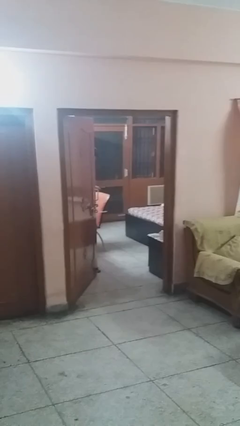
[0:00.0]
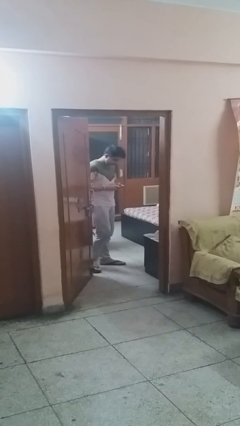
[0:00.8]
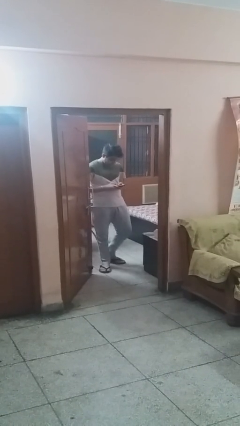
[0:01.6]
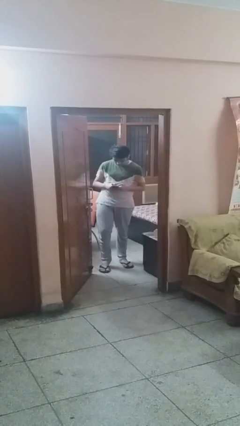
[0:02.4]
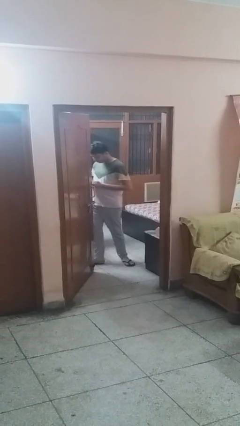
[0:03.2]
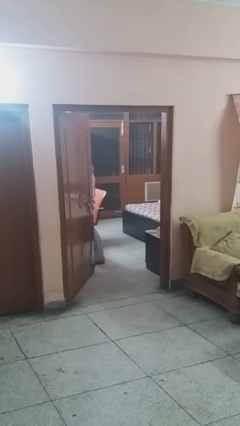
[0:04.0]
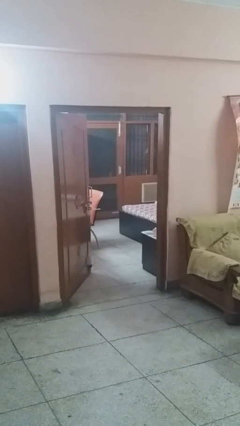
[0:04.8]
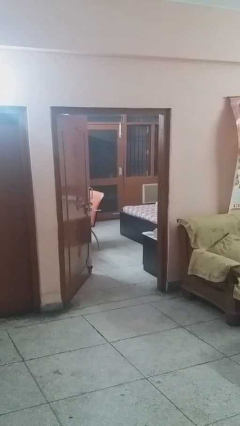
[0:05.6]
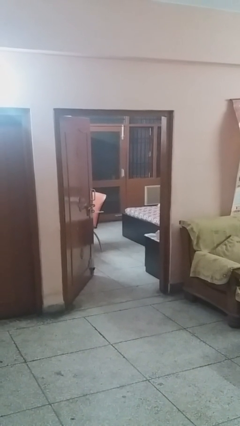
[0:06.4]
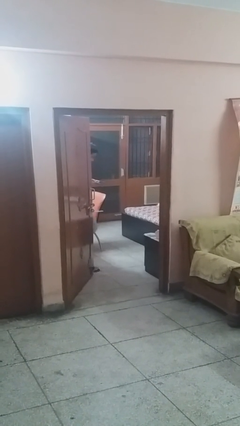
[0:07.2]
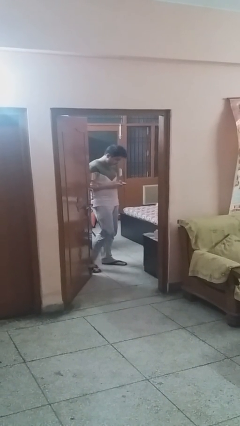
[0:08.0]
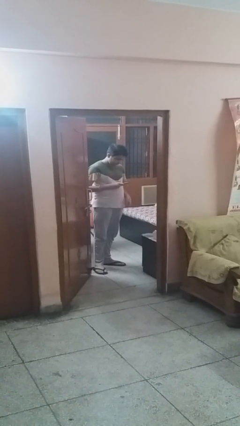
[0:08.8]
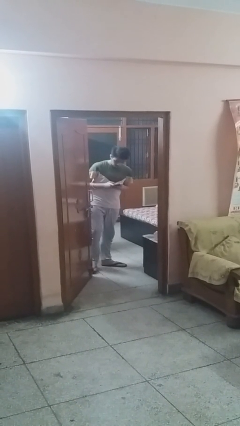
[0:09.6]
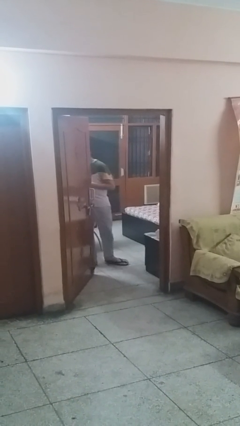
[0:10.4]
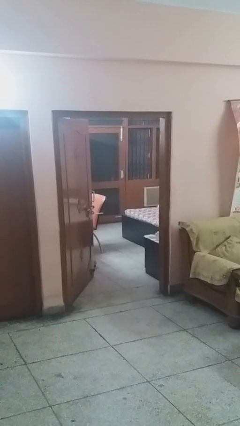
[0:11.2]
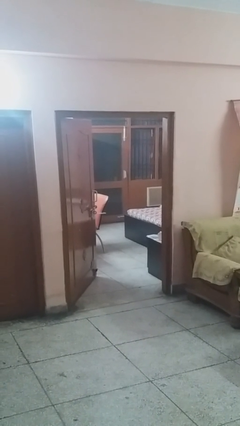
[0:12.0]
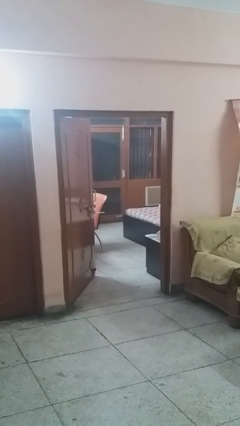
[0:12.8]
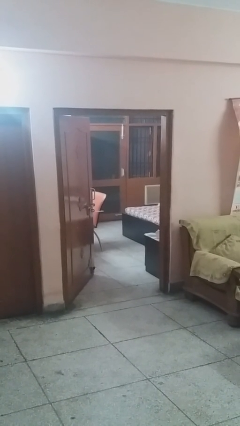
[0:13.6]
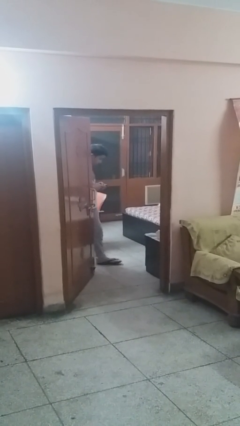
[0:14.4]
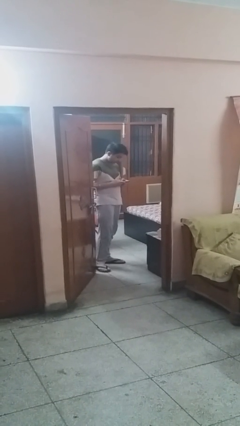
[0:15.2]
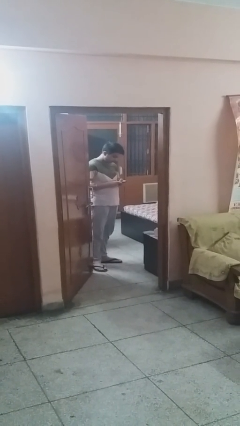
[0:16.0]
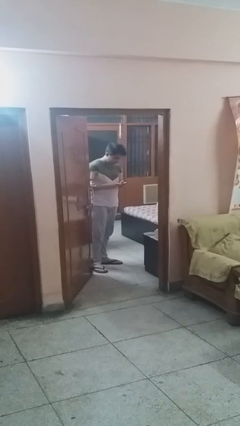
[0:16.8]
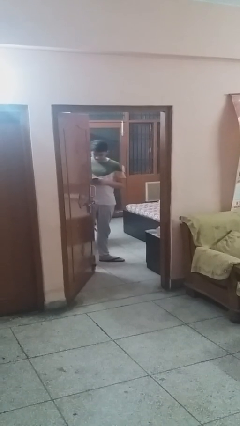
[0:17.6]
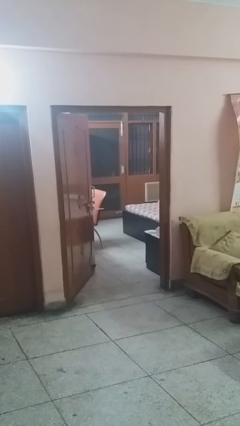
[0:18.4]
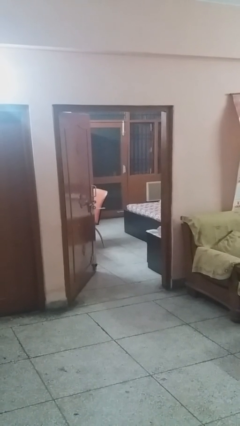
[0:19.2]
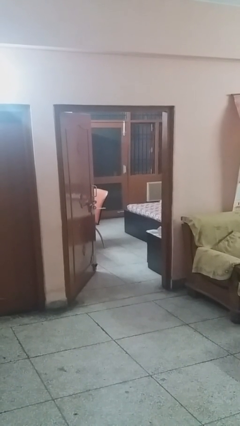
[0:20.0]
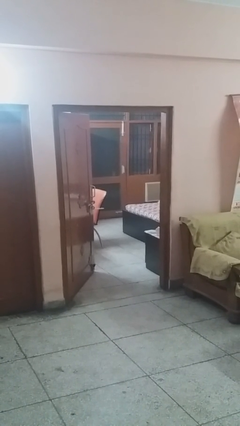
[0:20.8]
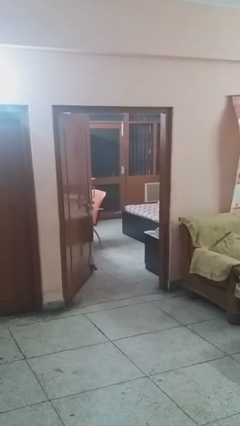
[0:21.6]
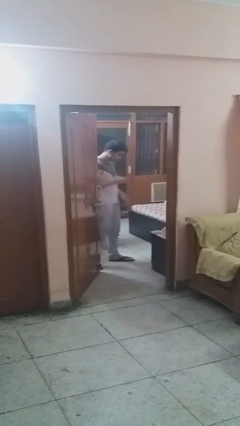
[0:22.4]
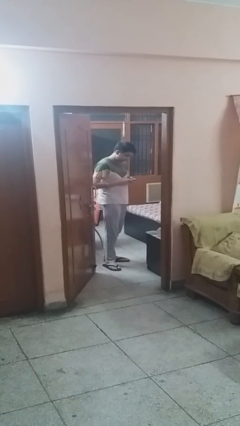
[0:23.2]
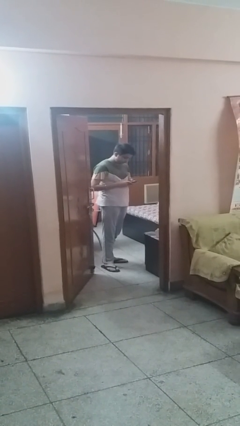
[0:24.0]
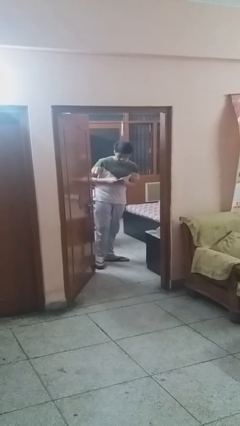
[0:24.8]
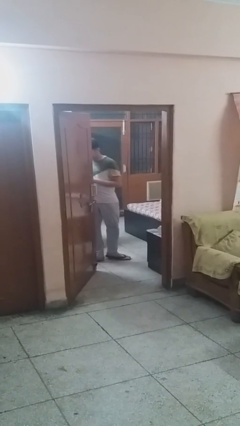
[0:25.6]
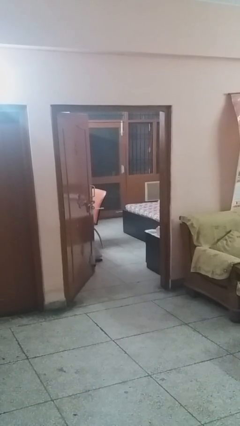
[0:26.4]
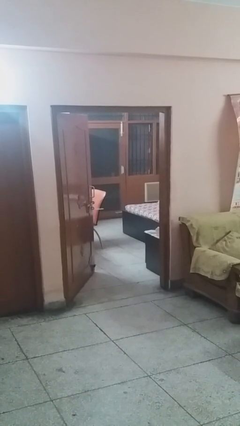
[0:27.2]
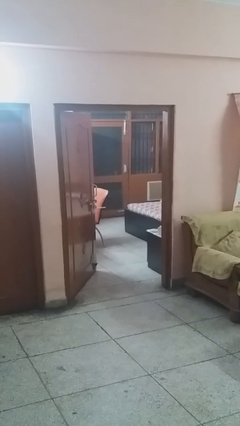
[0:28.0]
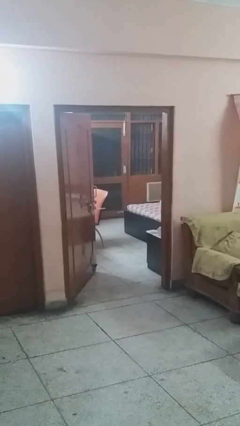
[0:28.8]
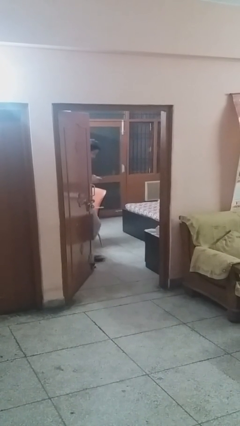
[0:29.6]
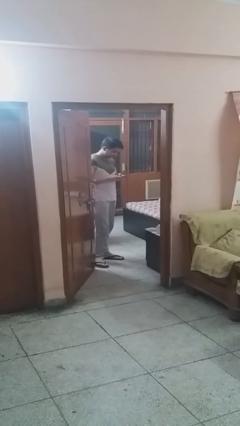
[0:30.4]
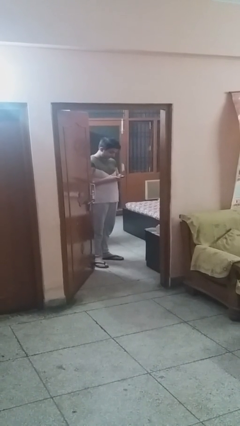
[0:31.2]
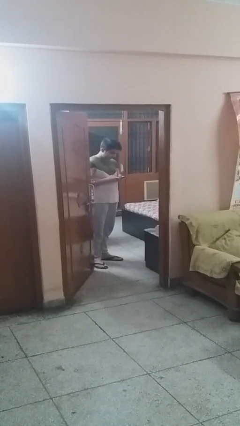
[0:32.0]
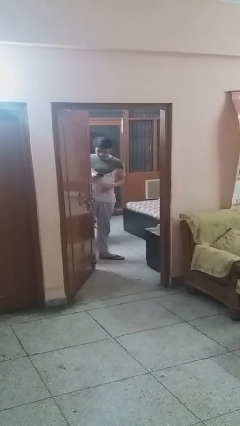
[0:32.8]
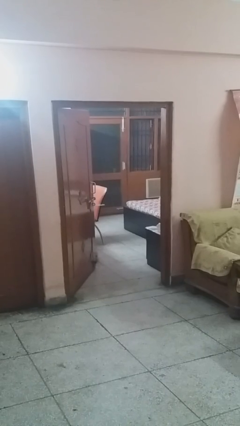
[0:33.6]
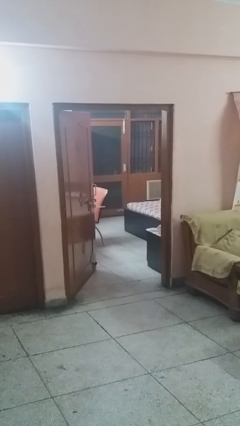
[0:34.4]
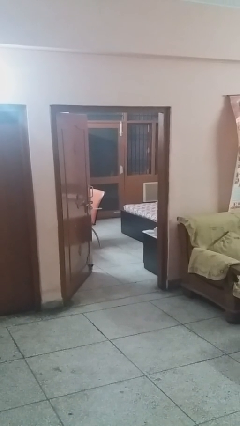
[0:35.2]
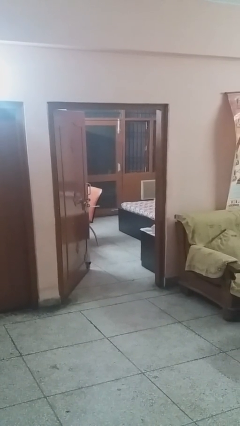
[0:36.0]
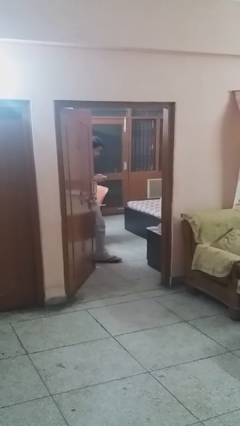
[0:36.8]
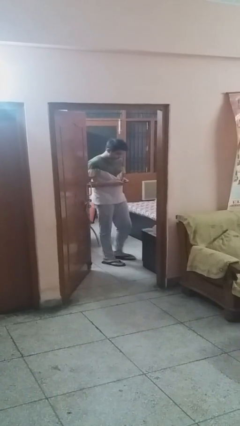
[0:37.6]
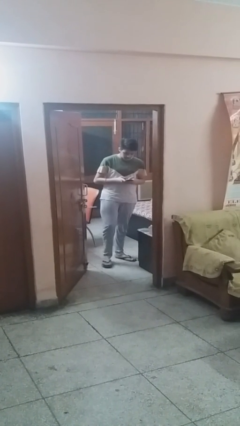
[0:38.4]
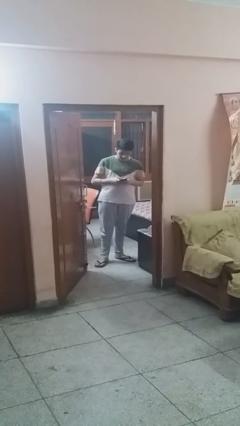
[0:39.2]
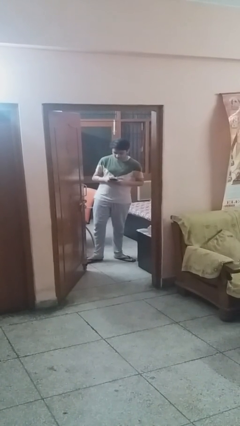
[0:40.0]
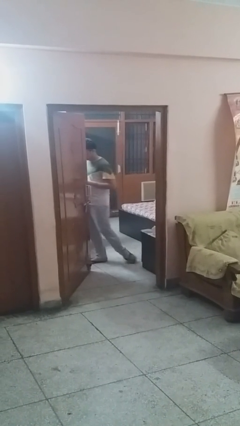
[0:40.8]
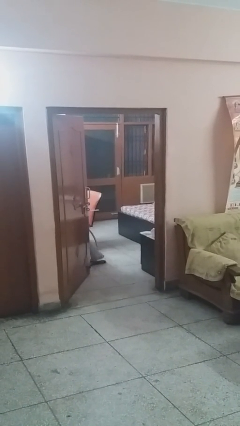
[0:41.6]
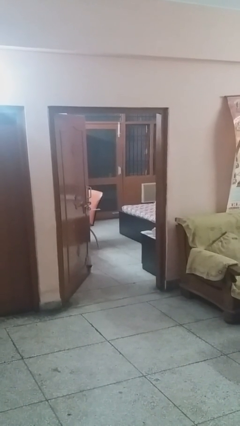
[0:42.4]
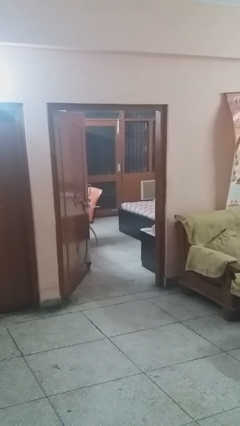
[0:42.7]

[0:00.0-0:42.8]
person texts on phone

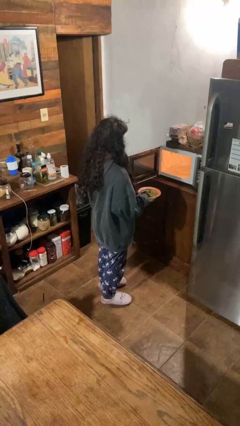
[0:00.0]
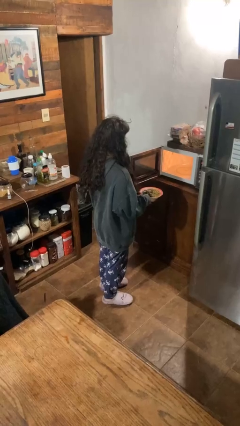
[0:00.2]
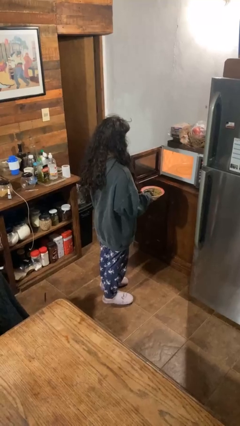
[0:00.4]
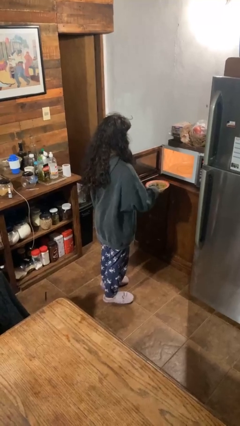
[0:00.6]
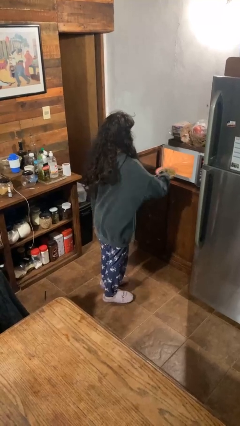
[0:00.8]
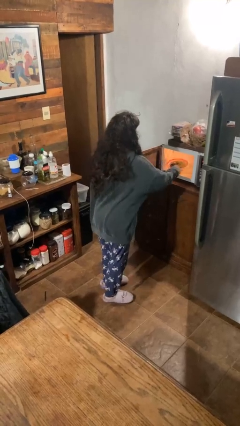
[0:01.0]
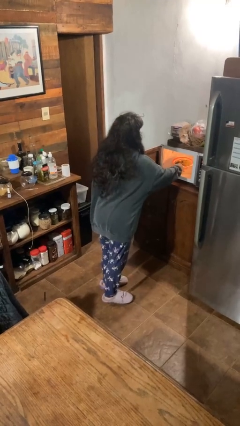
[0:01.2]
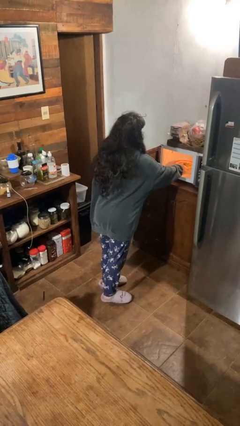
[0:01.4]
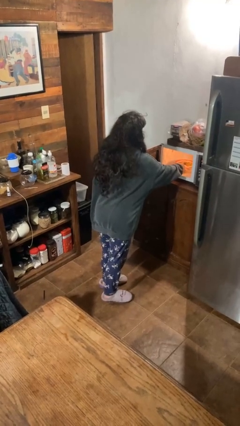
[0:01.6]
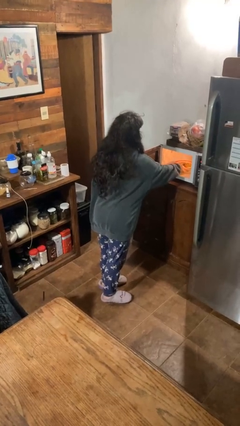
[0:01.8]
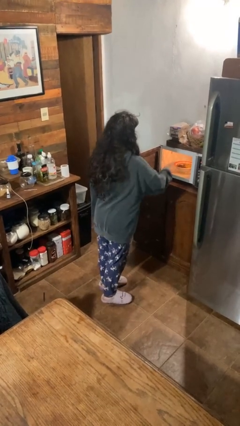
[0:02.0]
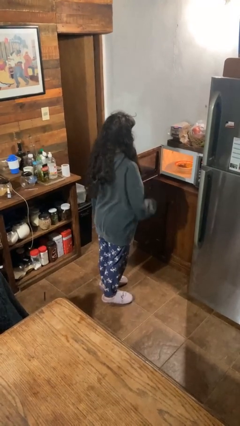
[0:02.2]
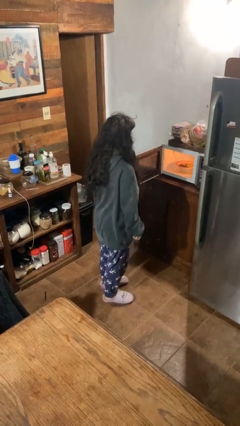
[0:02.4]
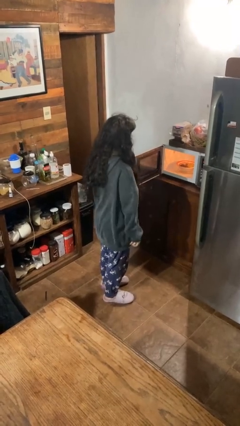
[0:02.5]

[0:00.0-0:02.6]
person puts object into microwave

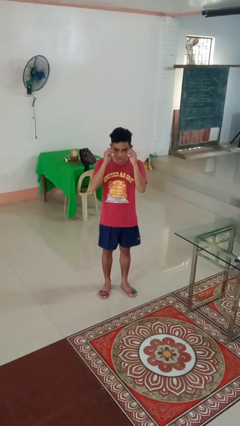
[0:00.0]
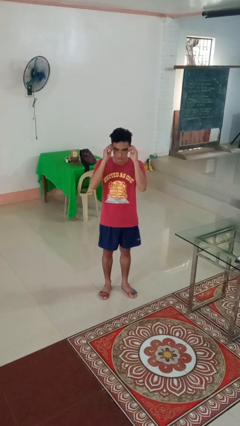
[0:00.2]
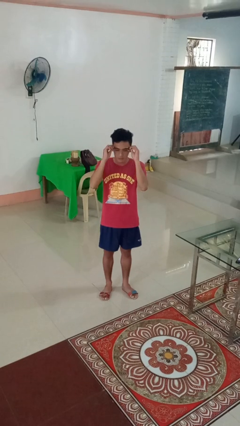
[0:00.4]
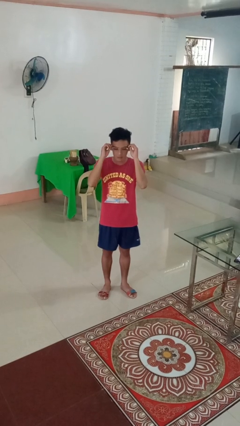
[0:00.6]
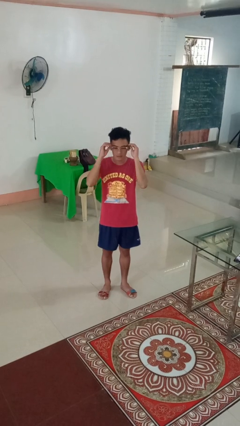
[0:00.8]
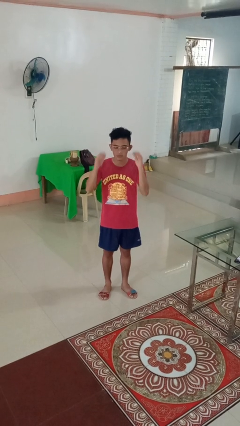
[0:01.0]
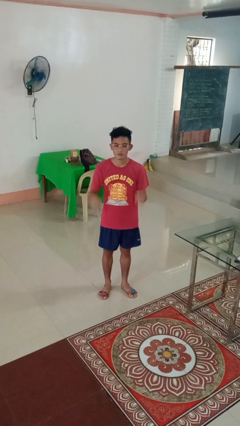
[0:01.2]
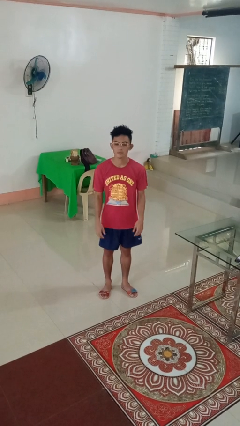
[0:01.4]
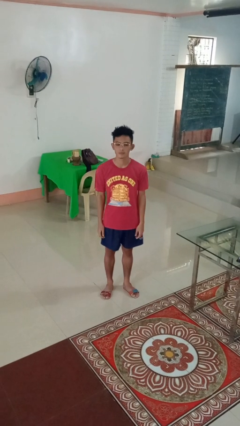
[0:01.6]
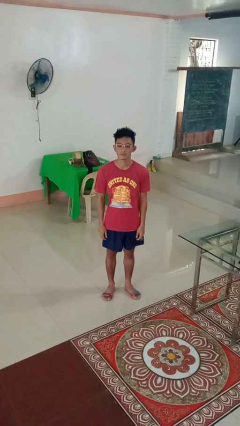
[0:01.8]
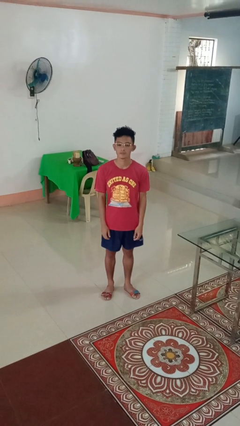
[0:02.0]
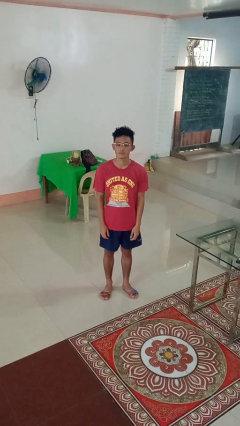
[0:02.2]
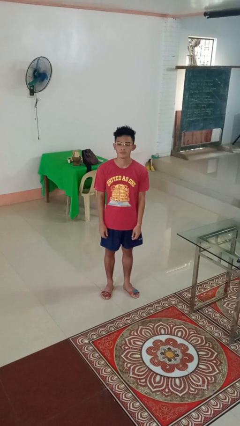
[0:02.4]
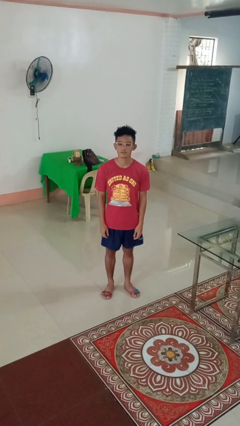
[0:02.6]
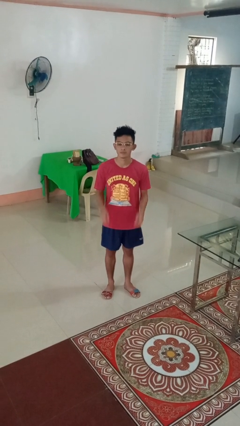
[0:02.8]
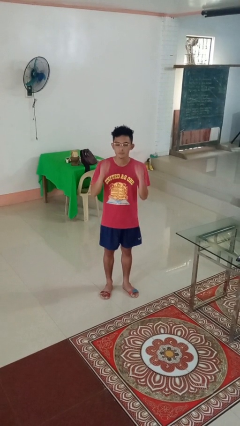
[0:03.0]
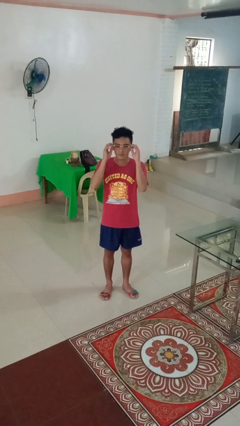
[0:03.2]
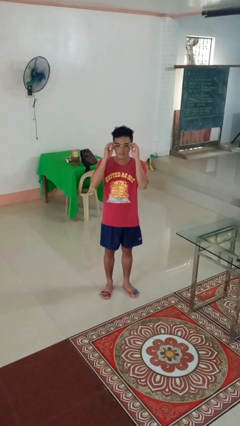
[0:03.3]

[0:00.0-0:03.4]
person puts on glasses

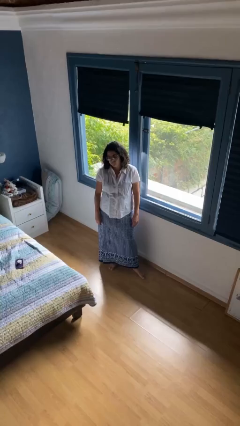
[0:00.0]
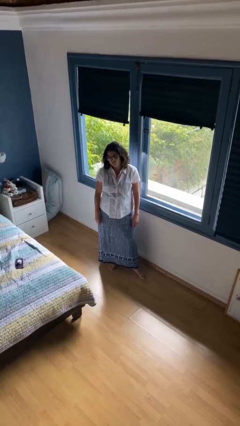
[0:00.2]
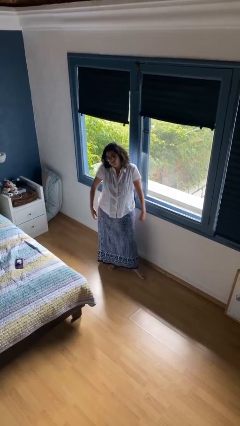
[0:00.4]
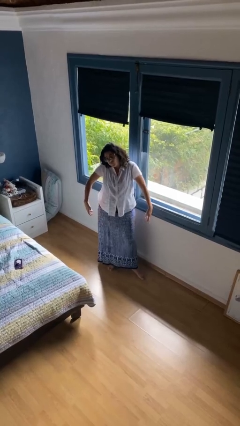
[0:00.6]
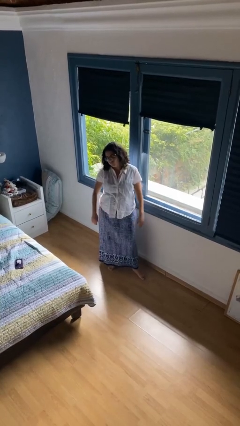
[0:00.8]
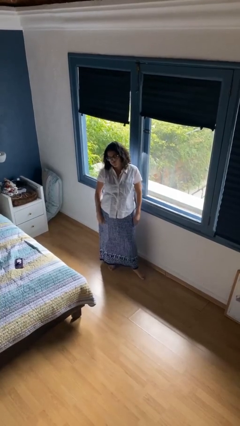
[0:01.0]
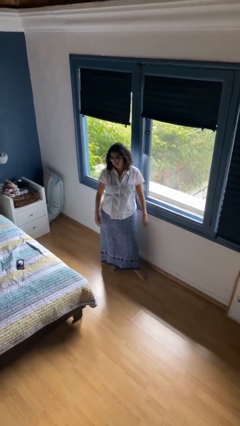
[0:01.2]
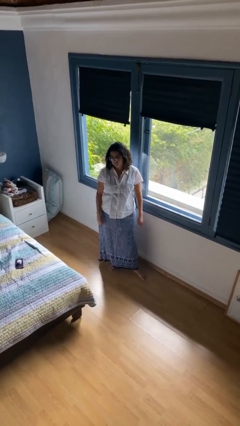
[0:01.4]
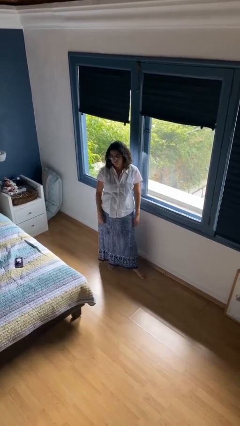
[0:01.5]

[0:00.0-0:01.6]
person shrugs
